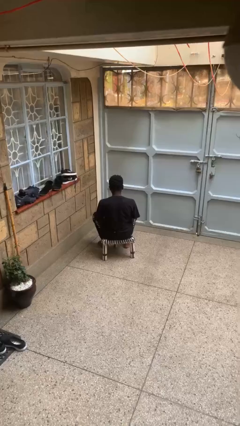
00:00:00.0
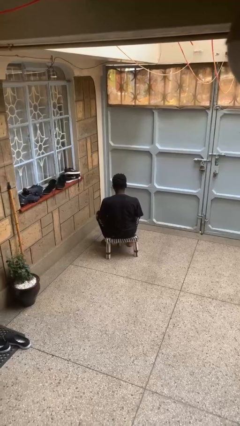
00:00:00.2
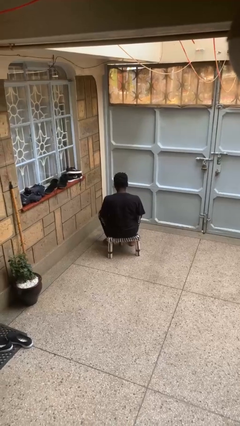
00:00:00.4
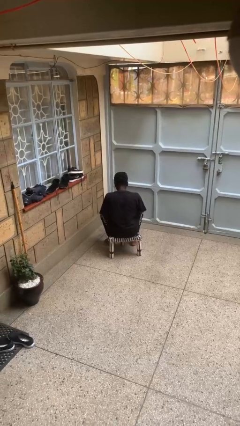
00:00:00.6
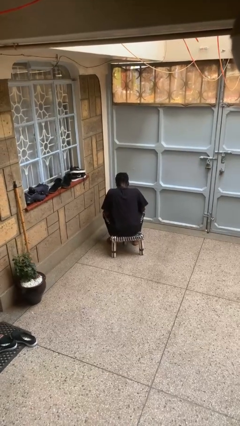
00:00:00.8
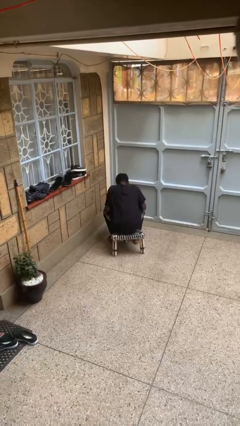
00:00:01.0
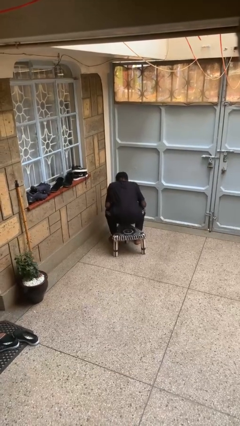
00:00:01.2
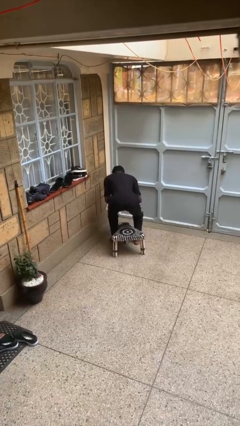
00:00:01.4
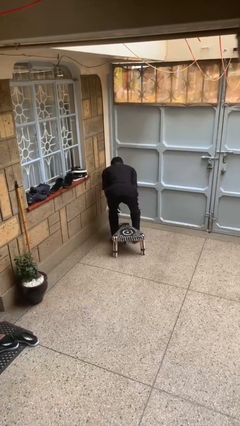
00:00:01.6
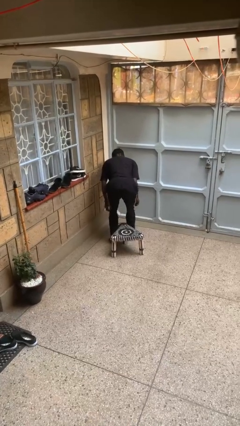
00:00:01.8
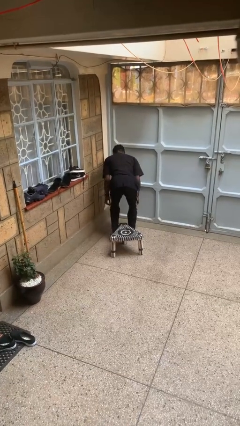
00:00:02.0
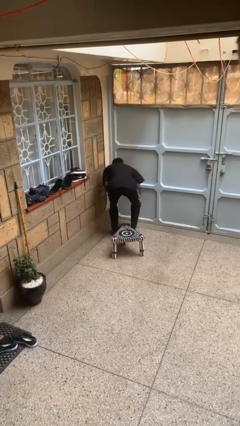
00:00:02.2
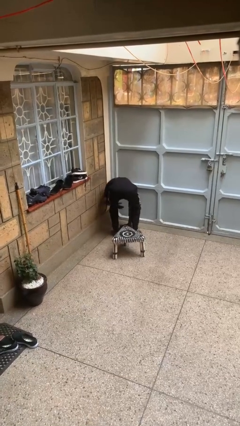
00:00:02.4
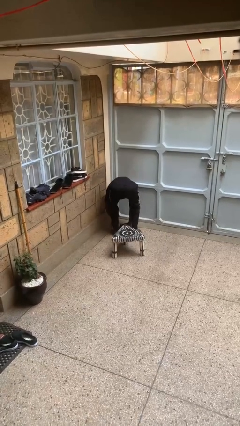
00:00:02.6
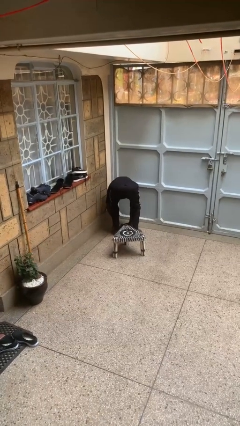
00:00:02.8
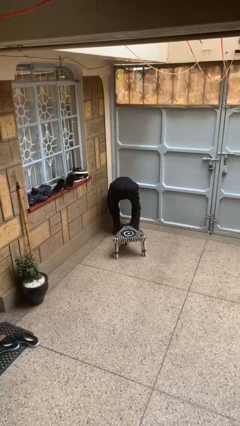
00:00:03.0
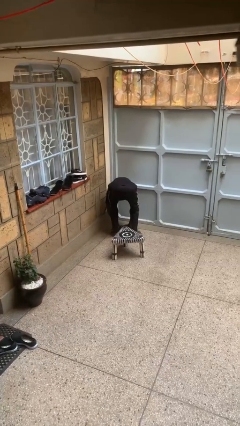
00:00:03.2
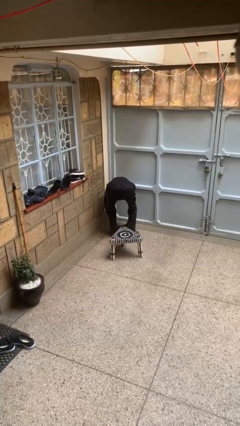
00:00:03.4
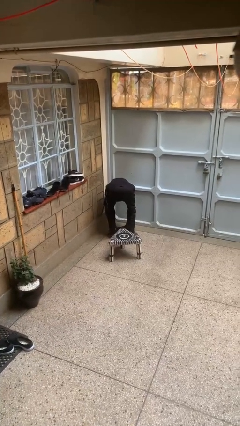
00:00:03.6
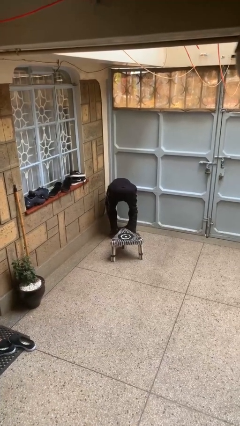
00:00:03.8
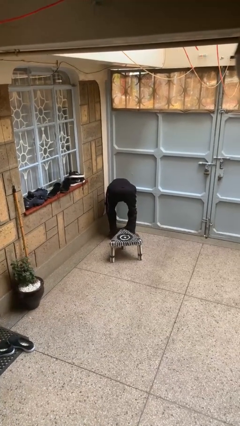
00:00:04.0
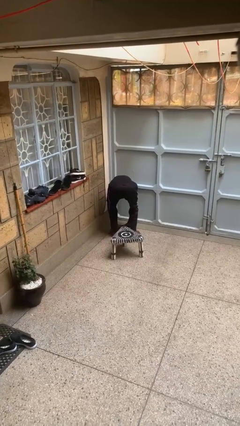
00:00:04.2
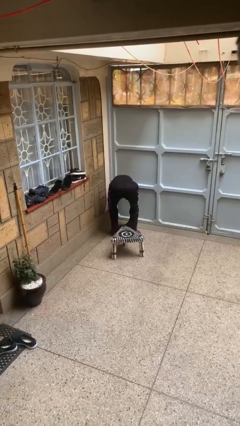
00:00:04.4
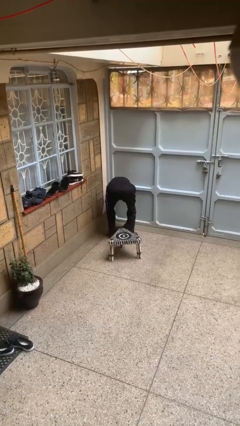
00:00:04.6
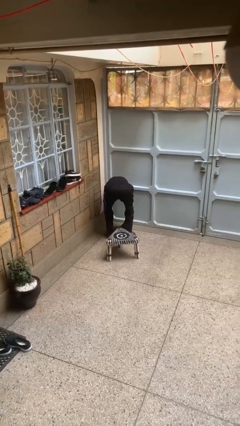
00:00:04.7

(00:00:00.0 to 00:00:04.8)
person falls from chair

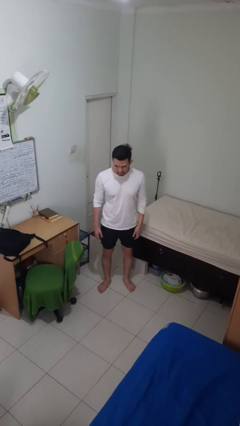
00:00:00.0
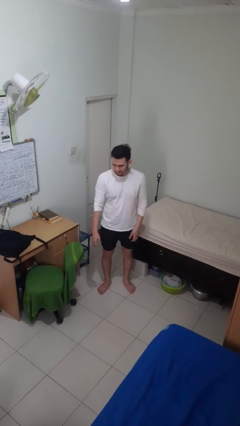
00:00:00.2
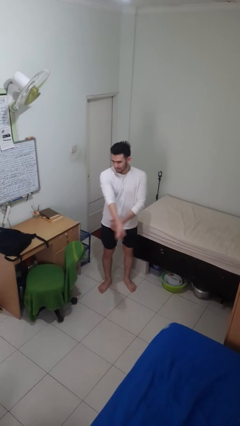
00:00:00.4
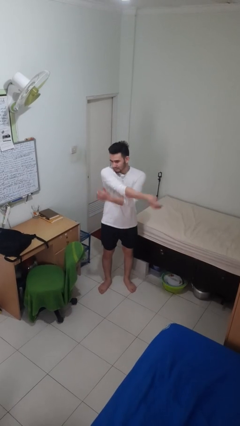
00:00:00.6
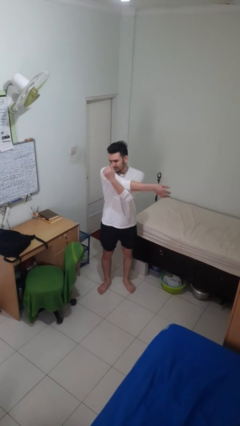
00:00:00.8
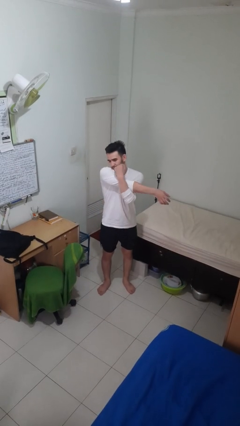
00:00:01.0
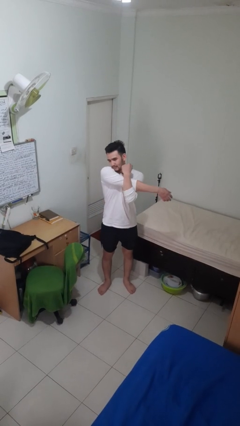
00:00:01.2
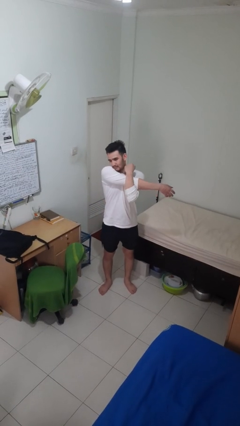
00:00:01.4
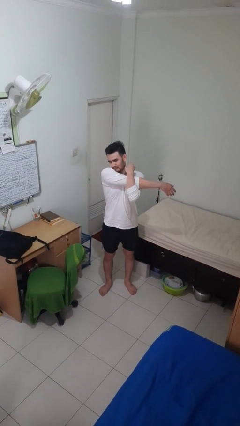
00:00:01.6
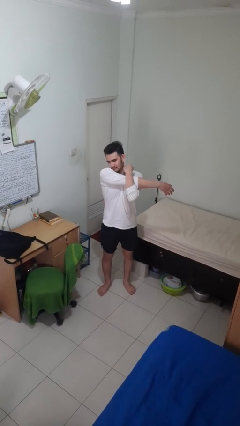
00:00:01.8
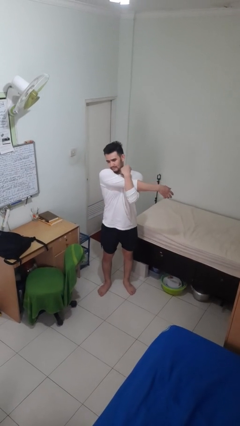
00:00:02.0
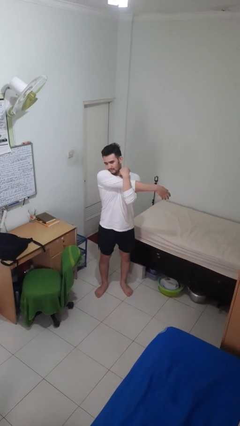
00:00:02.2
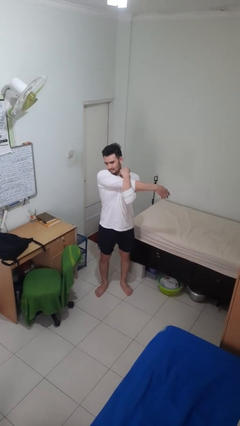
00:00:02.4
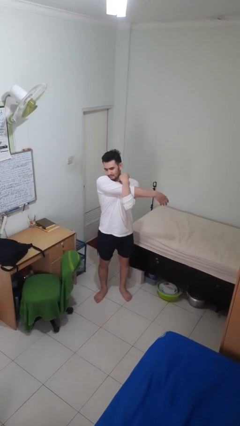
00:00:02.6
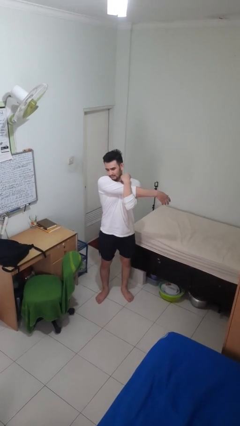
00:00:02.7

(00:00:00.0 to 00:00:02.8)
person stretches arms to side

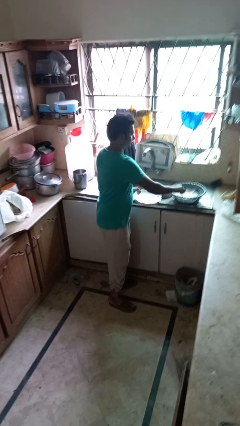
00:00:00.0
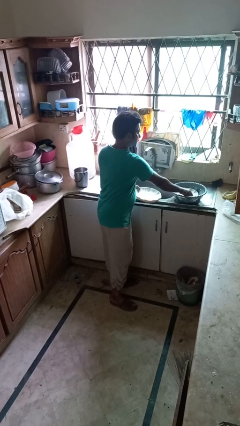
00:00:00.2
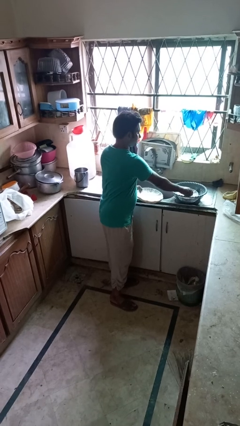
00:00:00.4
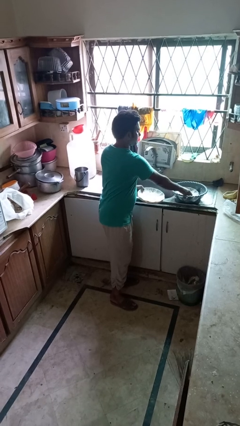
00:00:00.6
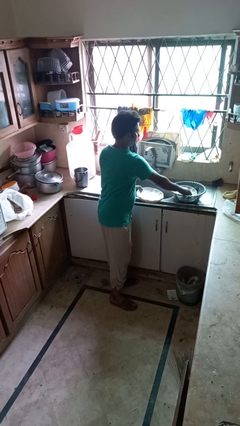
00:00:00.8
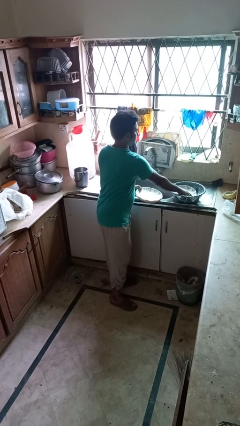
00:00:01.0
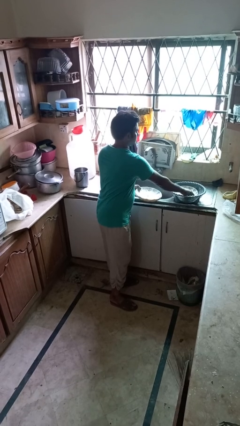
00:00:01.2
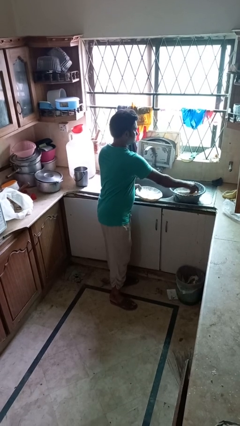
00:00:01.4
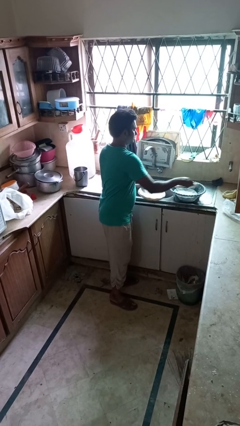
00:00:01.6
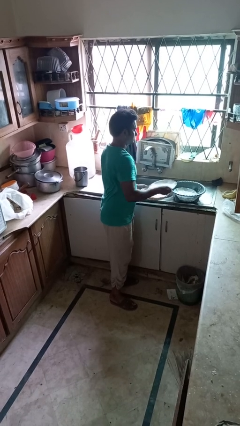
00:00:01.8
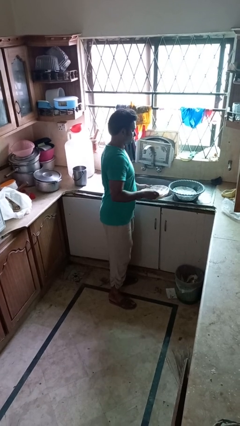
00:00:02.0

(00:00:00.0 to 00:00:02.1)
person unloads dishwasher

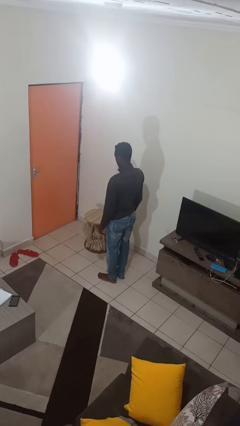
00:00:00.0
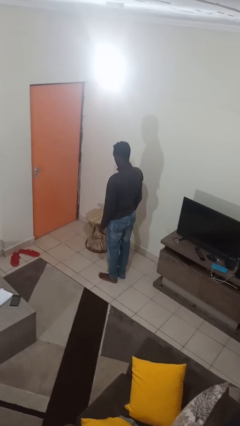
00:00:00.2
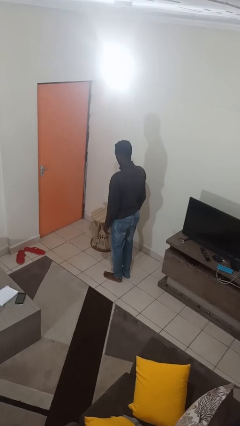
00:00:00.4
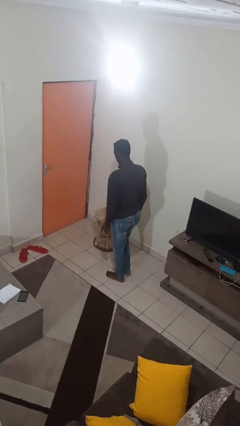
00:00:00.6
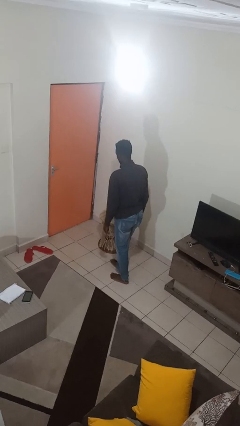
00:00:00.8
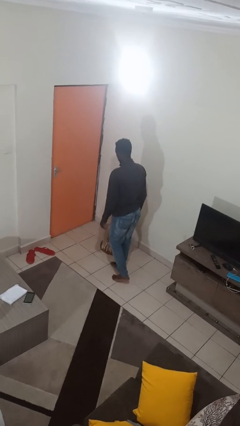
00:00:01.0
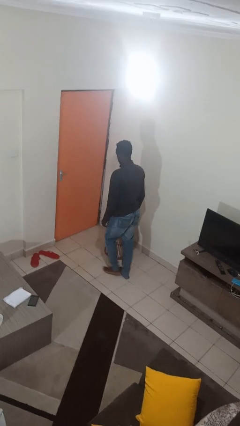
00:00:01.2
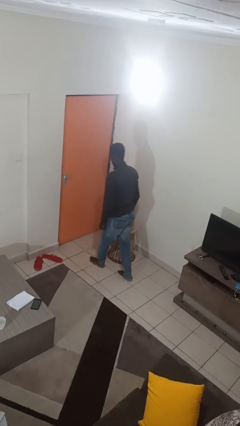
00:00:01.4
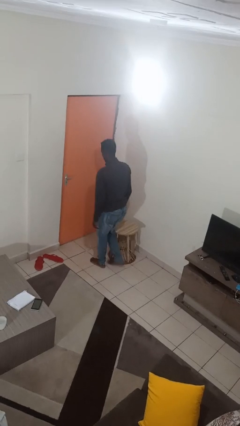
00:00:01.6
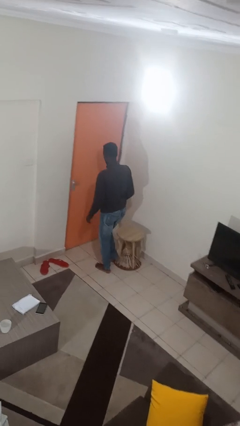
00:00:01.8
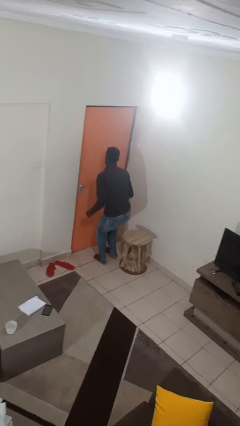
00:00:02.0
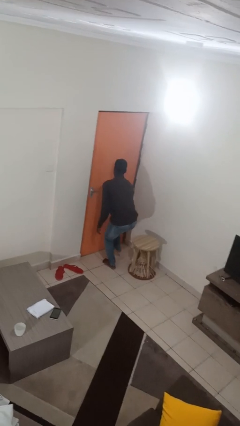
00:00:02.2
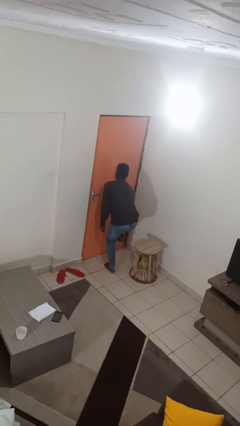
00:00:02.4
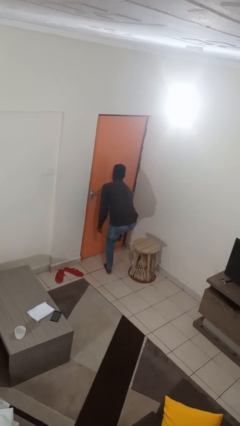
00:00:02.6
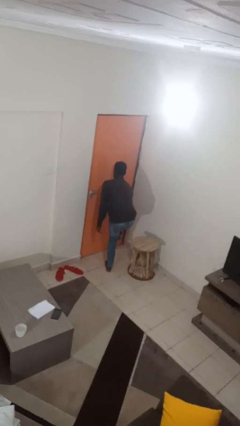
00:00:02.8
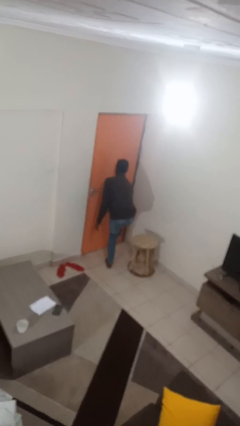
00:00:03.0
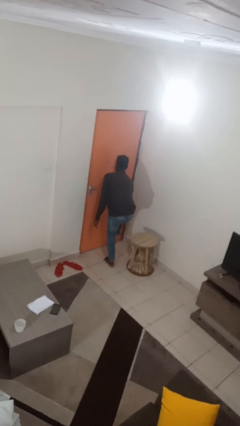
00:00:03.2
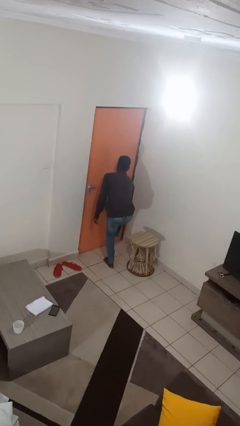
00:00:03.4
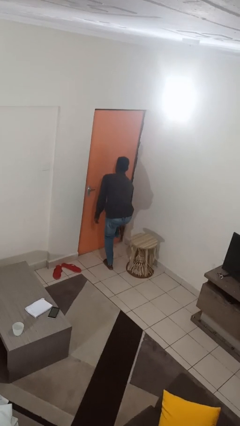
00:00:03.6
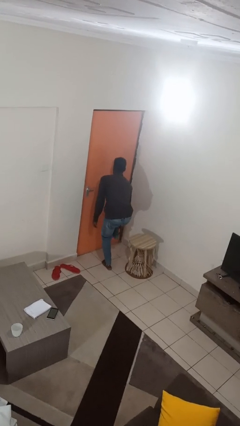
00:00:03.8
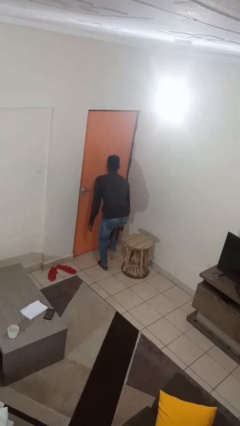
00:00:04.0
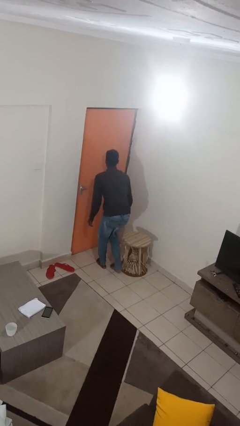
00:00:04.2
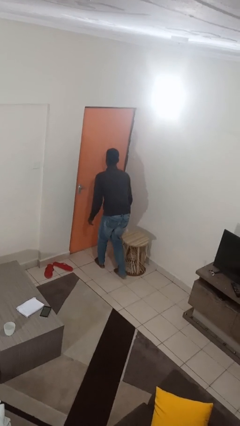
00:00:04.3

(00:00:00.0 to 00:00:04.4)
person stubs toe

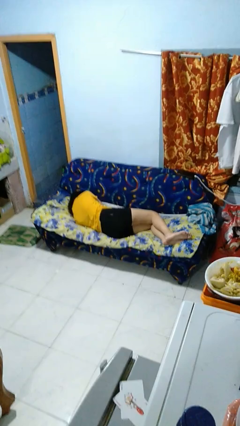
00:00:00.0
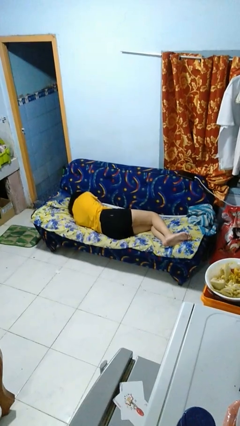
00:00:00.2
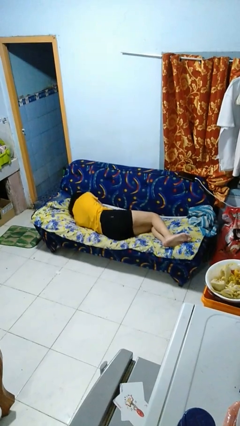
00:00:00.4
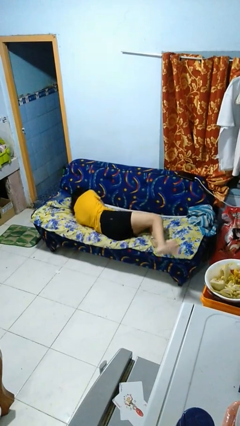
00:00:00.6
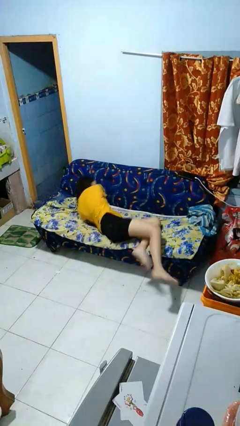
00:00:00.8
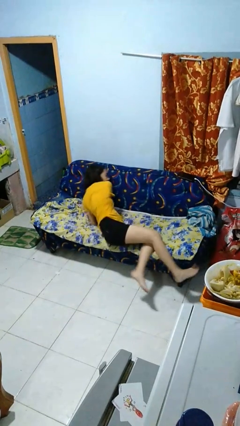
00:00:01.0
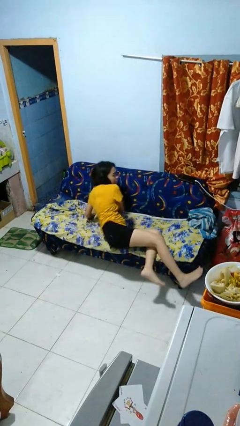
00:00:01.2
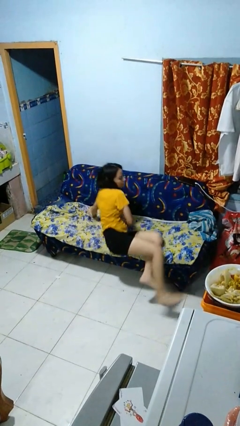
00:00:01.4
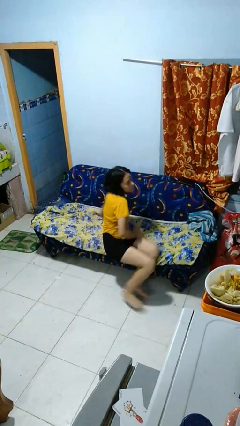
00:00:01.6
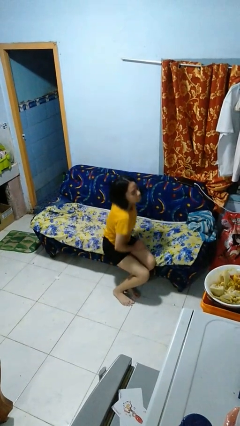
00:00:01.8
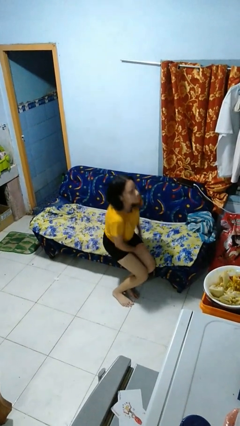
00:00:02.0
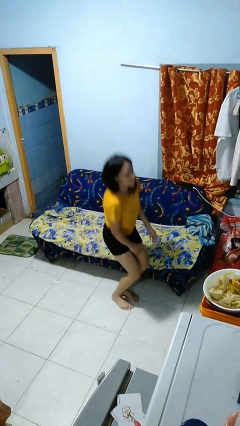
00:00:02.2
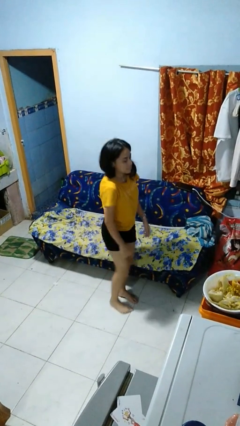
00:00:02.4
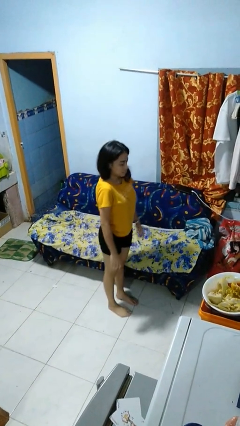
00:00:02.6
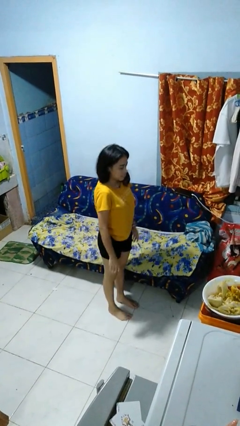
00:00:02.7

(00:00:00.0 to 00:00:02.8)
person stands up

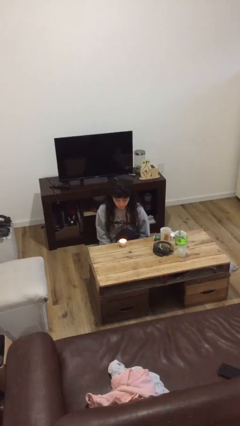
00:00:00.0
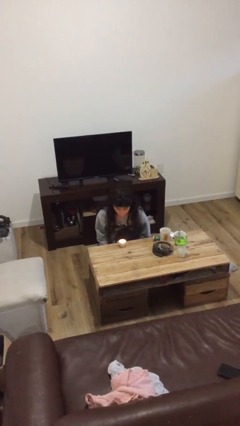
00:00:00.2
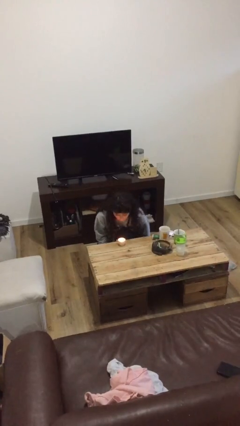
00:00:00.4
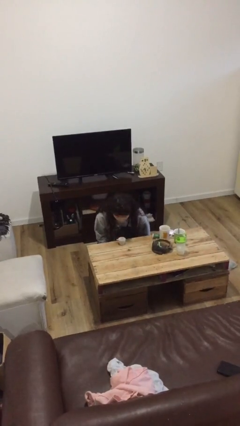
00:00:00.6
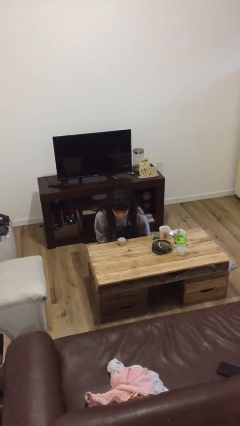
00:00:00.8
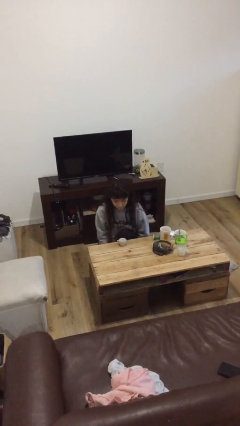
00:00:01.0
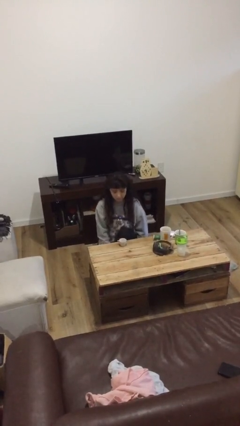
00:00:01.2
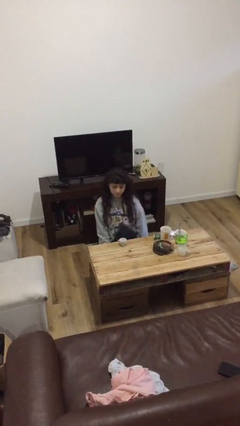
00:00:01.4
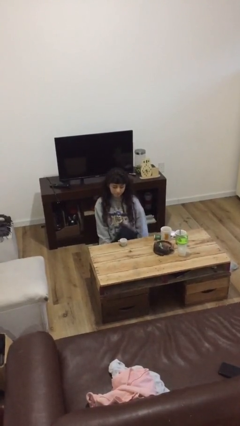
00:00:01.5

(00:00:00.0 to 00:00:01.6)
person extinguishes candle
